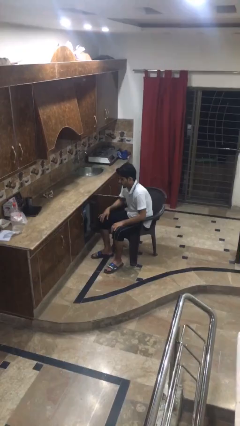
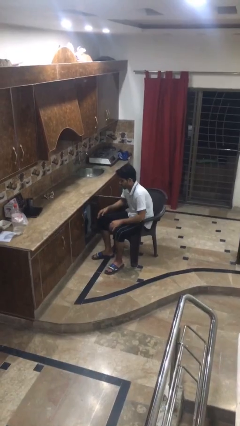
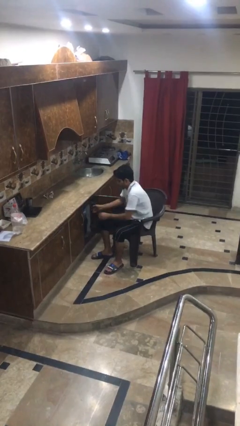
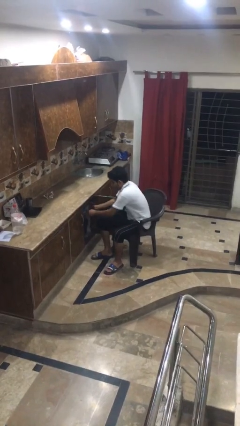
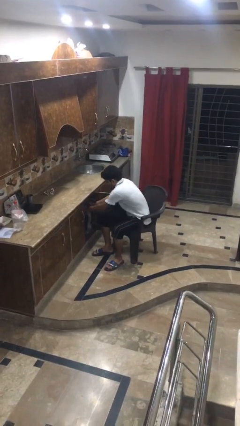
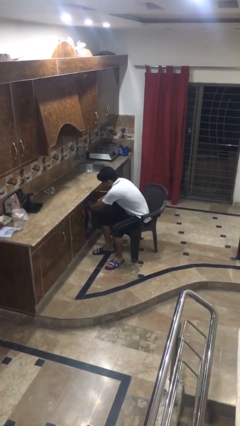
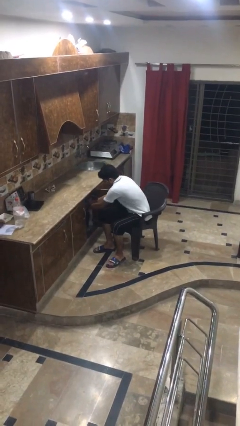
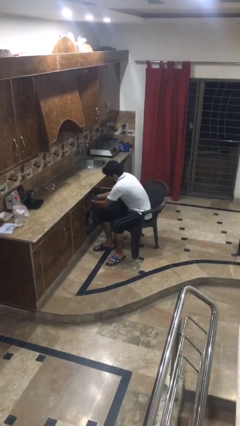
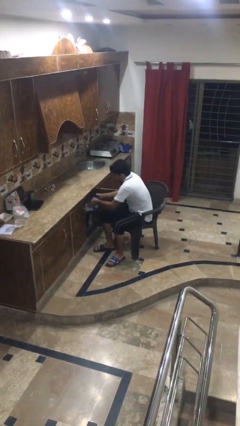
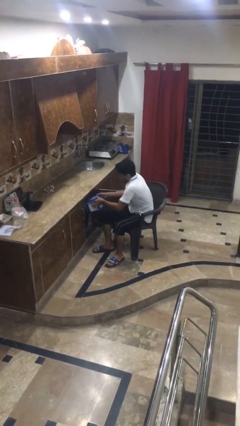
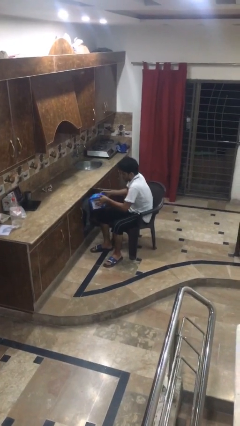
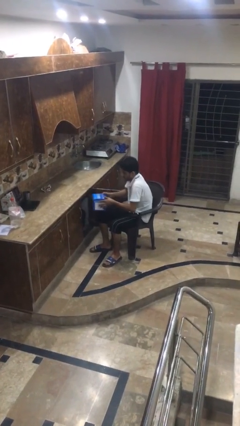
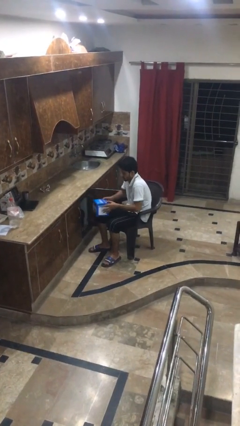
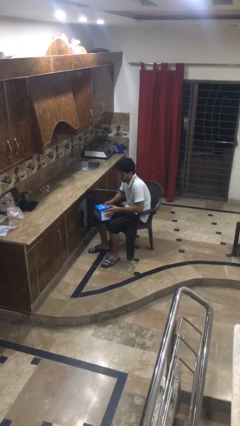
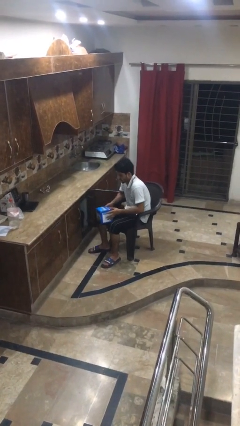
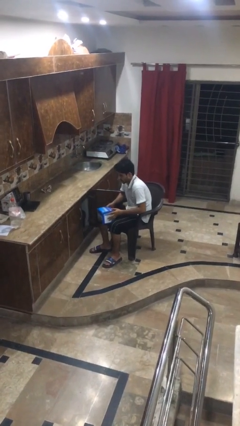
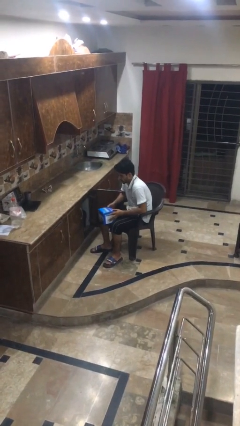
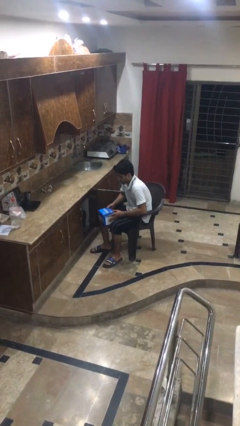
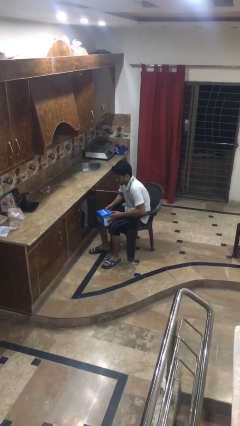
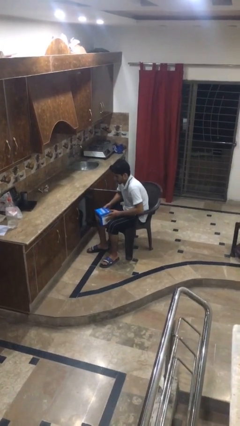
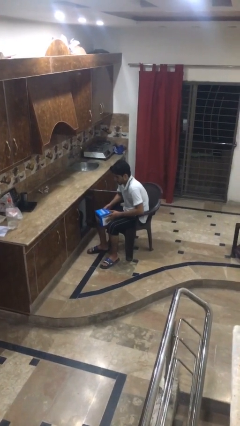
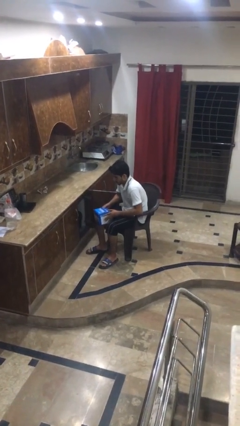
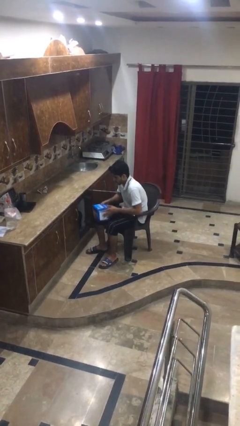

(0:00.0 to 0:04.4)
person picks up object from cabinet

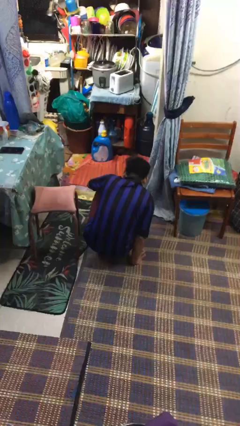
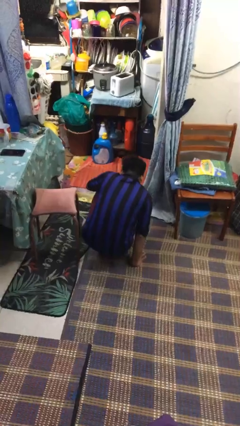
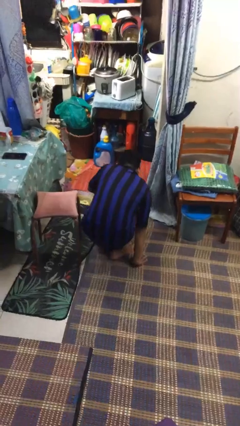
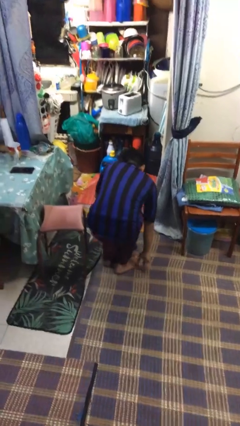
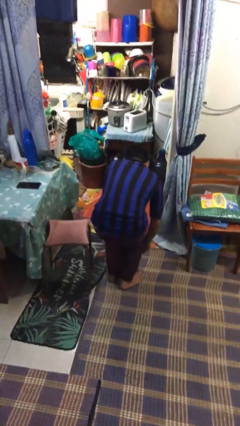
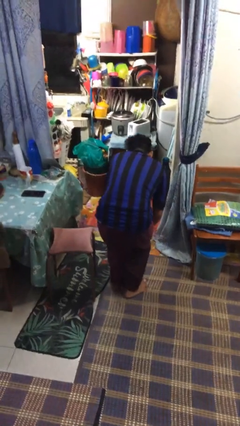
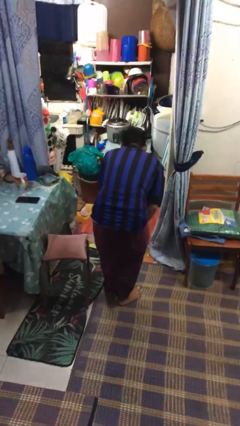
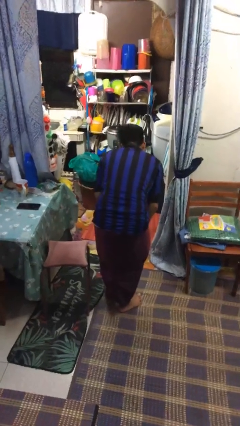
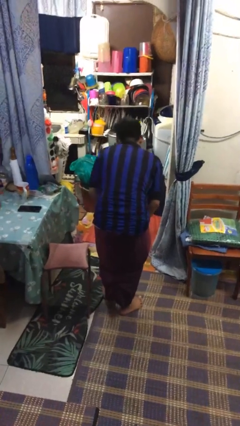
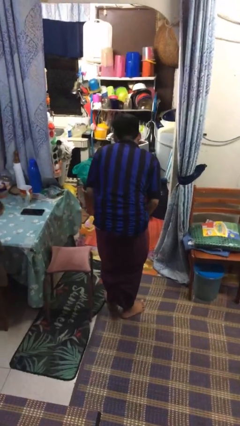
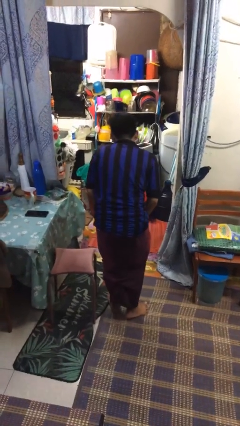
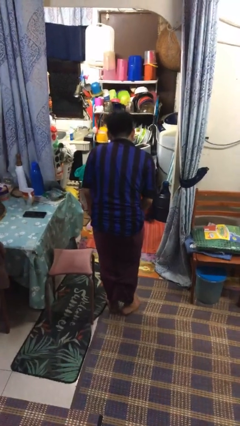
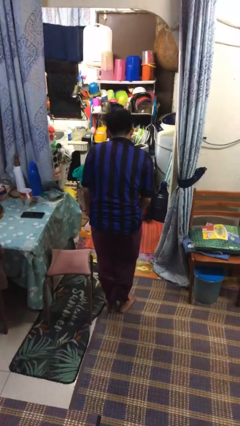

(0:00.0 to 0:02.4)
person stands up from floor

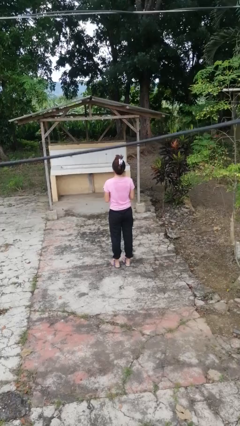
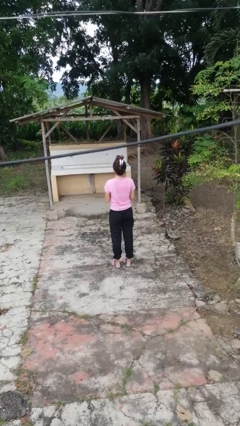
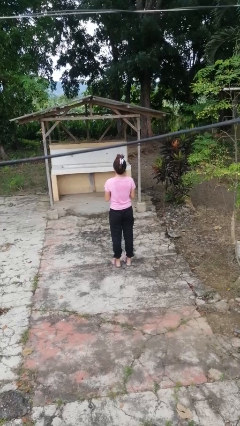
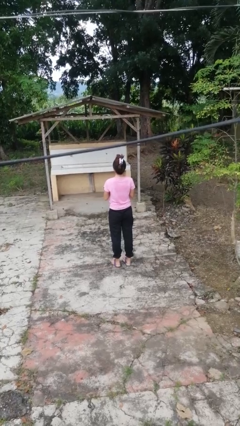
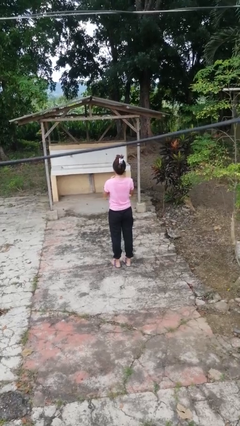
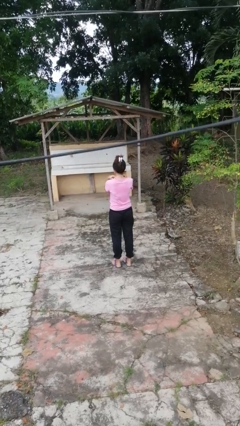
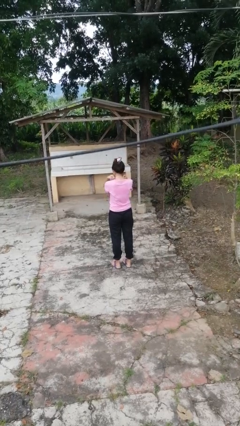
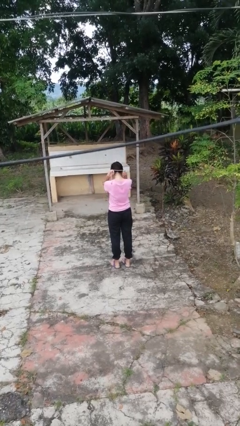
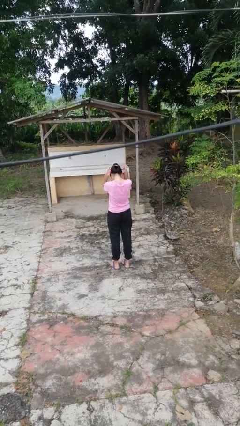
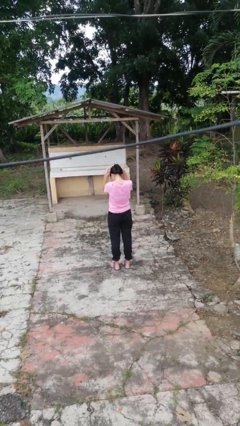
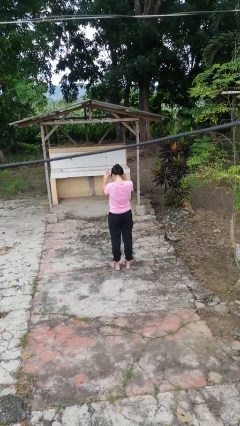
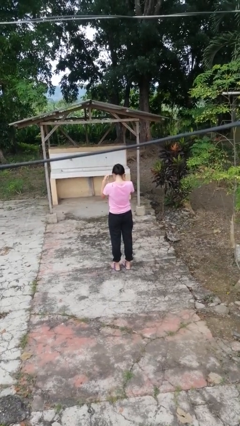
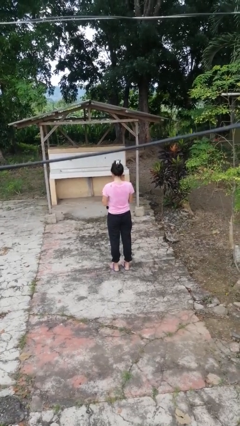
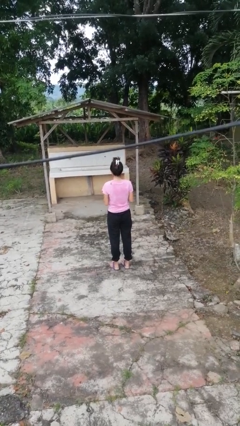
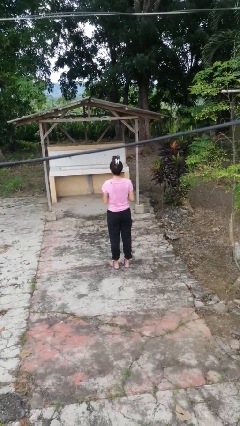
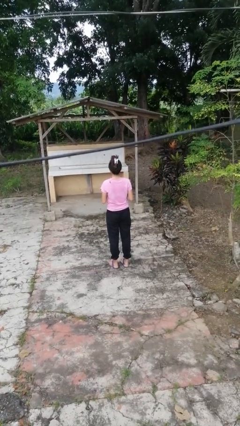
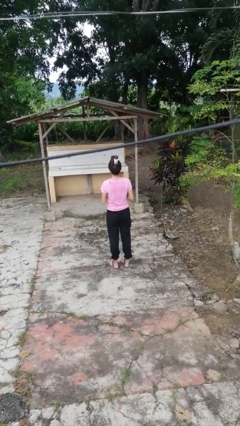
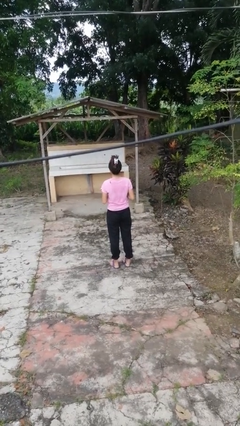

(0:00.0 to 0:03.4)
person takes off necklace

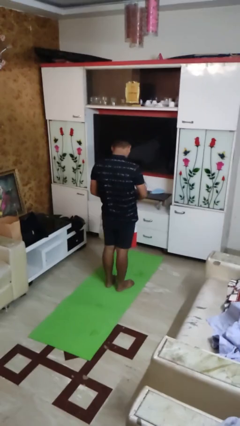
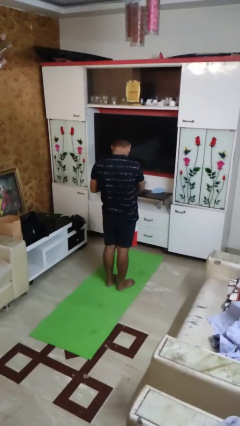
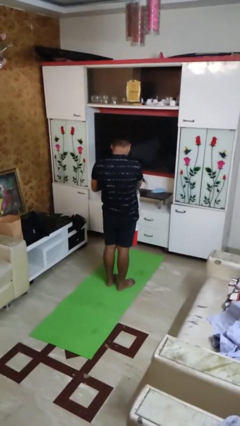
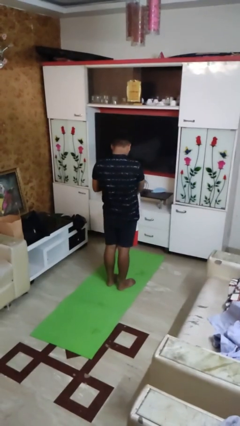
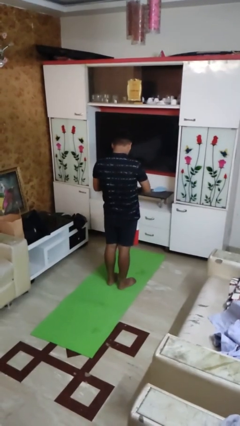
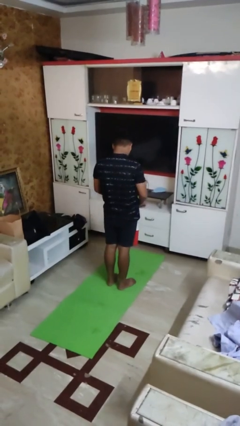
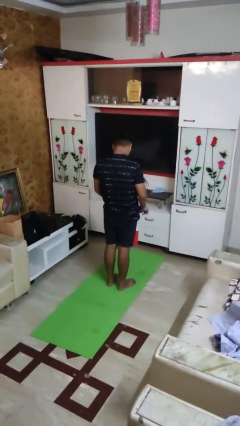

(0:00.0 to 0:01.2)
person puts object into basket

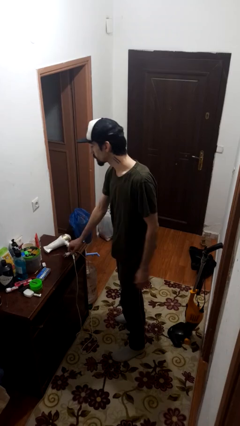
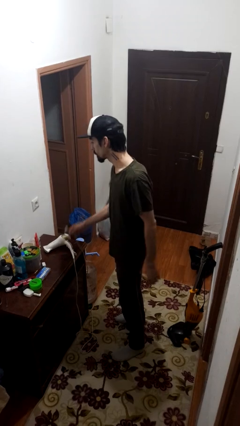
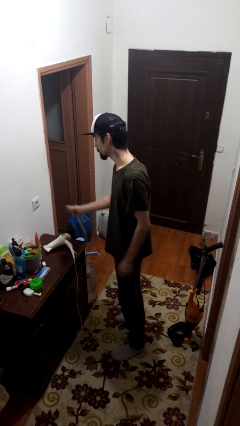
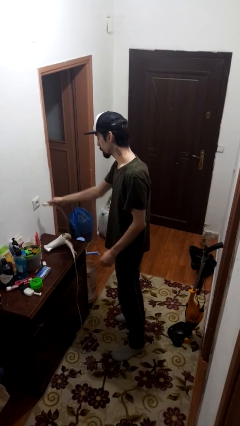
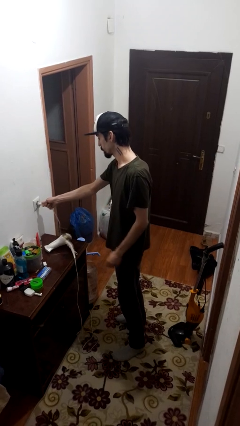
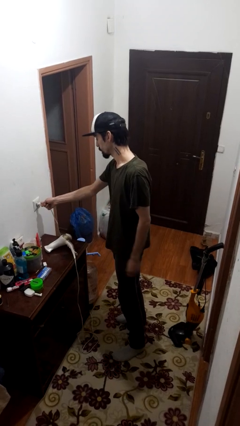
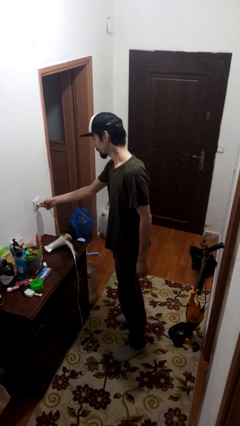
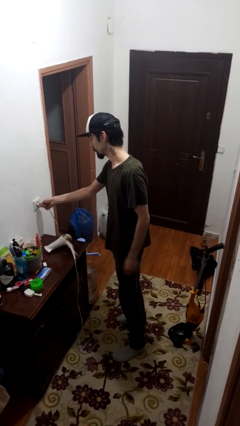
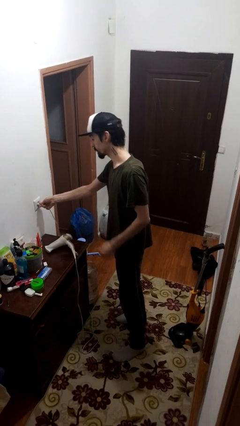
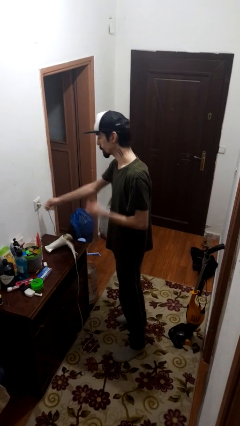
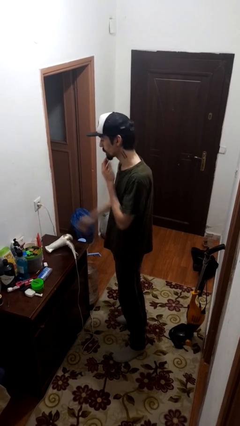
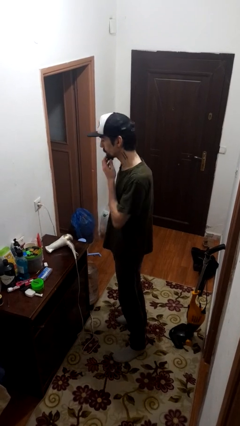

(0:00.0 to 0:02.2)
person plugs into electrical socket

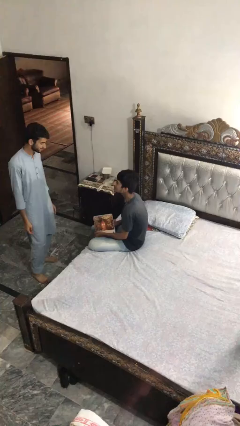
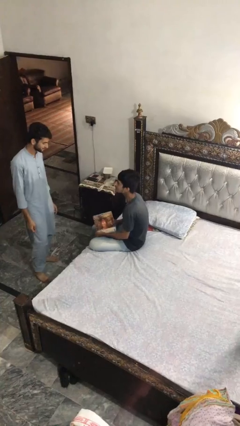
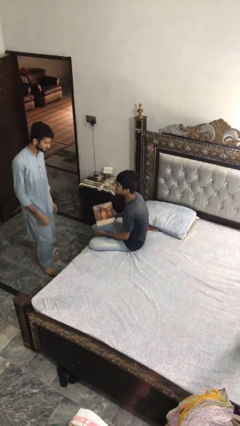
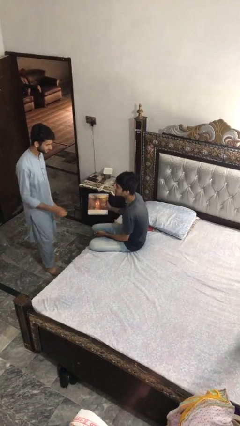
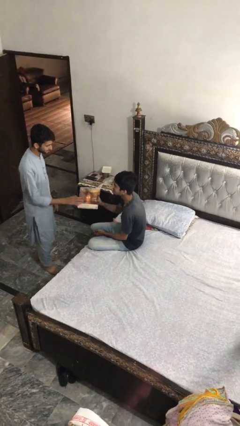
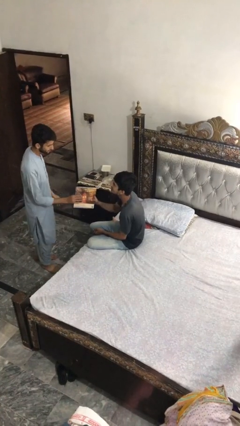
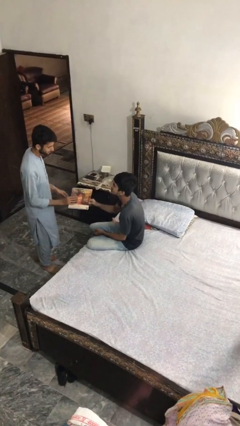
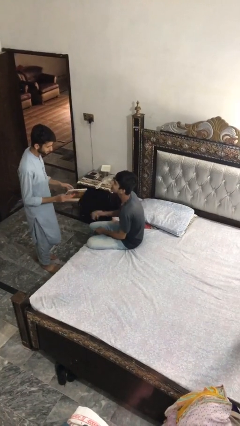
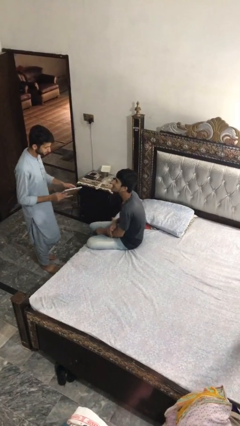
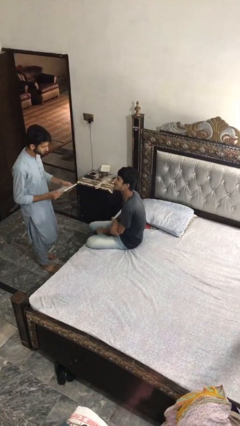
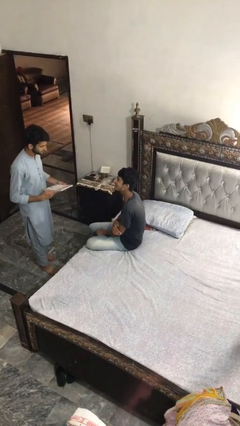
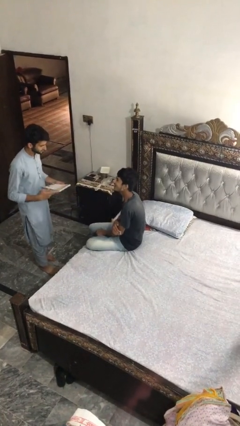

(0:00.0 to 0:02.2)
person transfers object to person

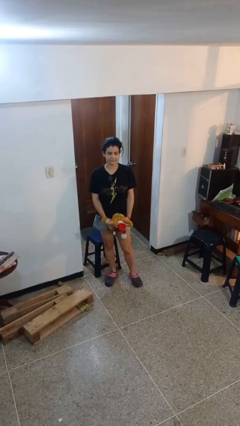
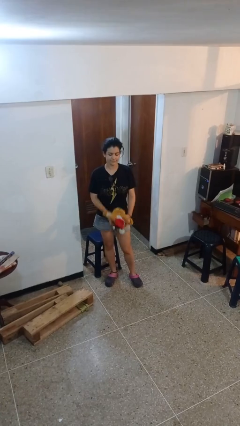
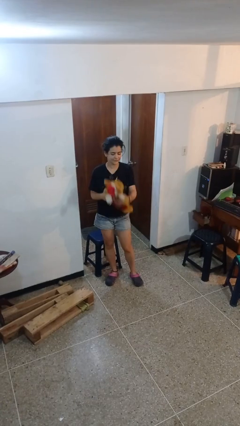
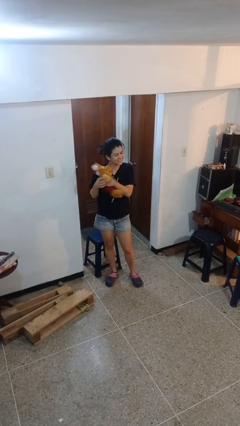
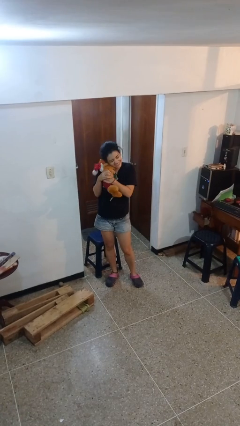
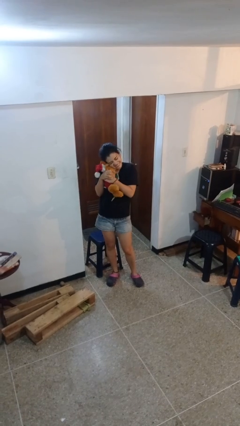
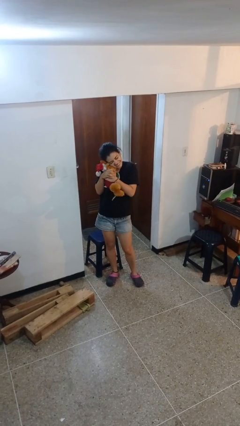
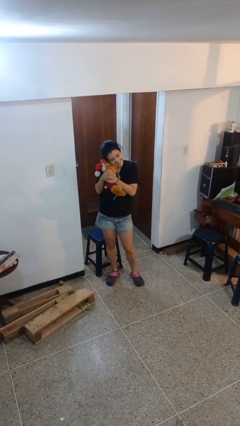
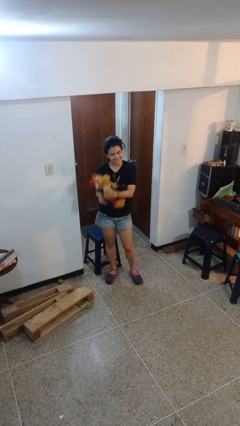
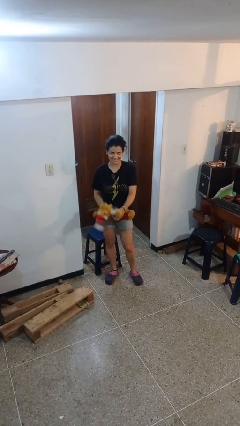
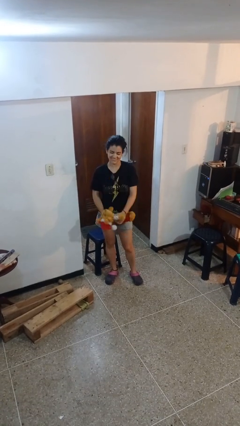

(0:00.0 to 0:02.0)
person hugs stuffed animal
